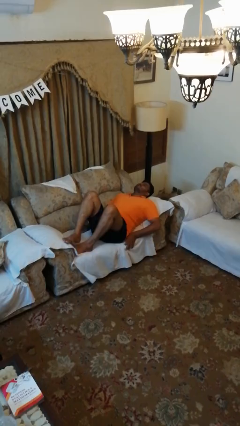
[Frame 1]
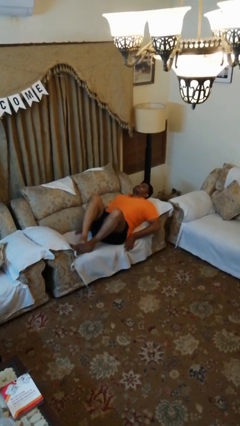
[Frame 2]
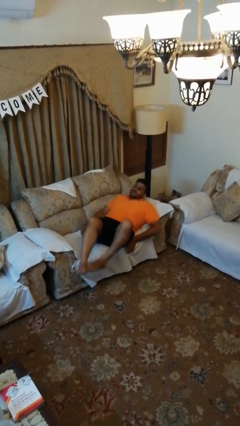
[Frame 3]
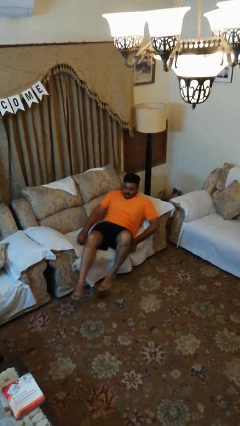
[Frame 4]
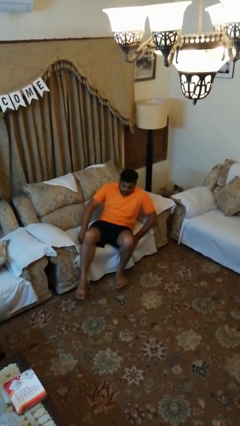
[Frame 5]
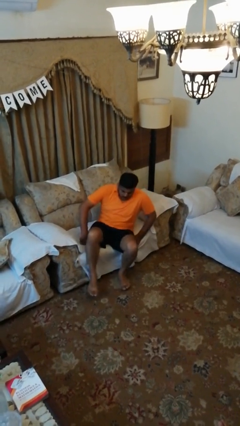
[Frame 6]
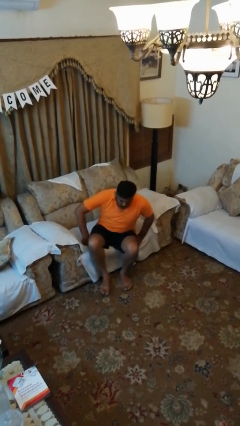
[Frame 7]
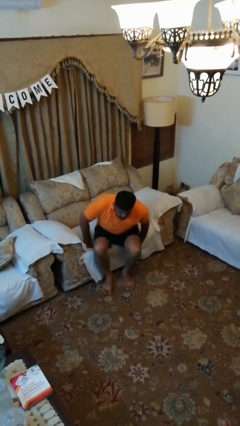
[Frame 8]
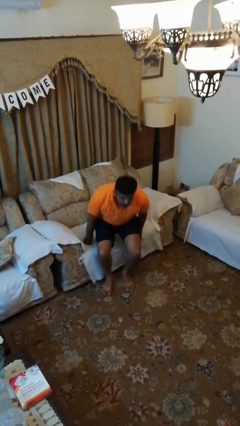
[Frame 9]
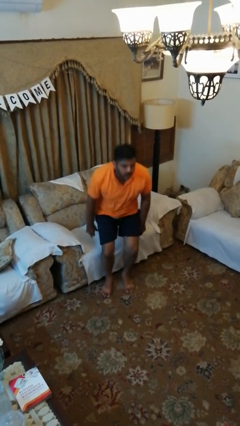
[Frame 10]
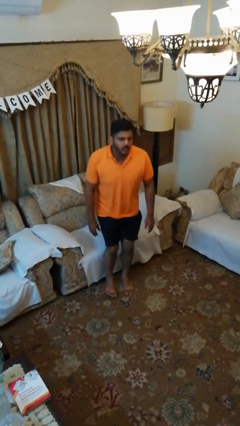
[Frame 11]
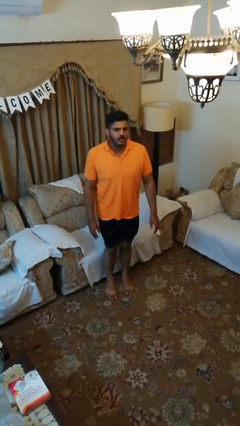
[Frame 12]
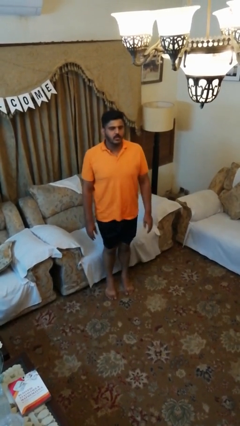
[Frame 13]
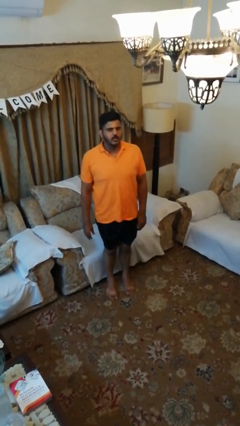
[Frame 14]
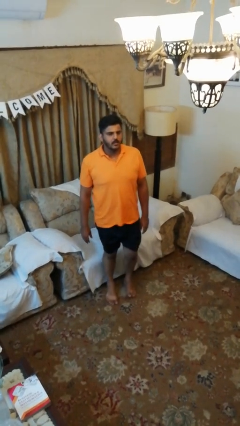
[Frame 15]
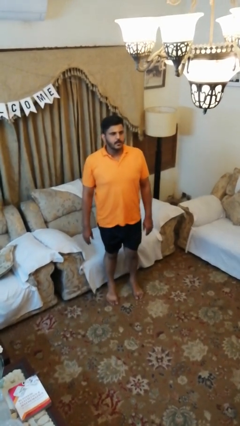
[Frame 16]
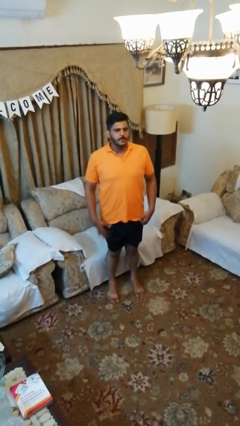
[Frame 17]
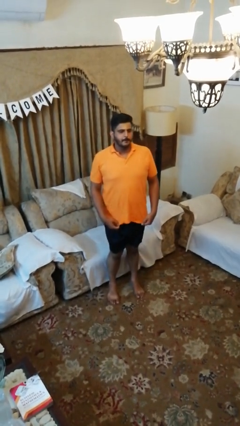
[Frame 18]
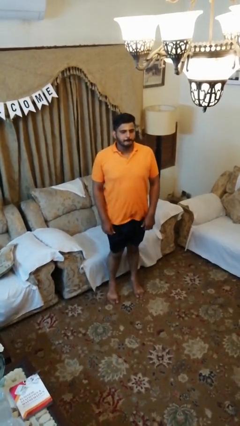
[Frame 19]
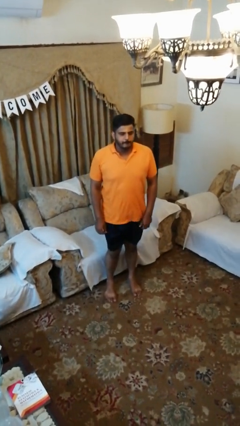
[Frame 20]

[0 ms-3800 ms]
person stands up

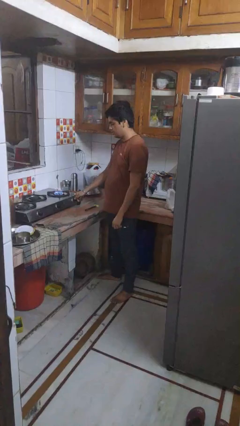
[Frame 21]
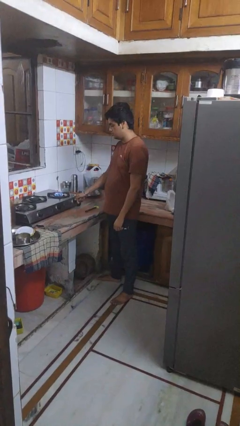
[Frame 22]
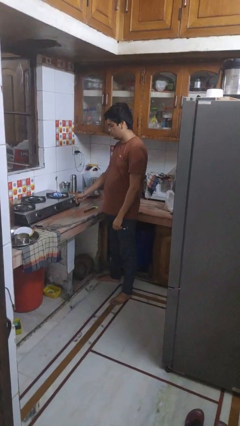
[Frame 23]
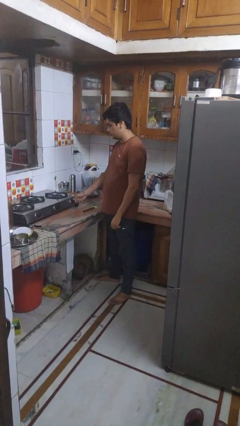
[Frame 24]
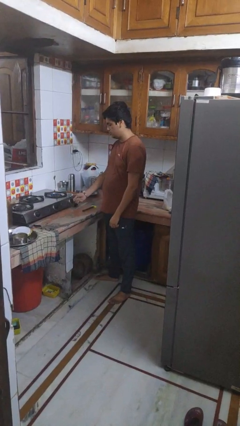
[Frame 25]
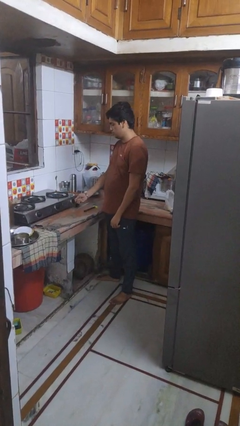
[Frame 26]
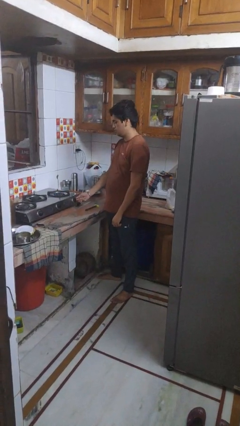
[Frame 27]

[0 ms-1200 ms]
person turns off stovetop

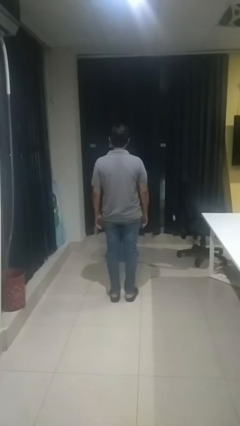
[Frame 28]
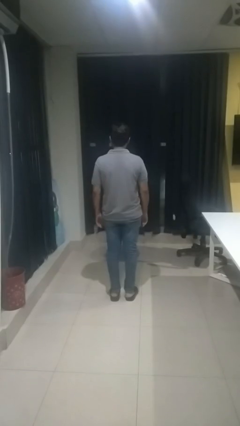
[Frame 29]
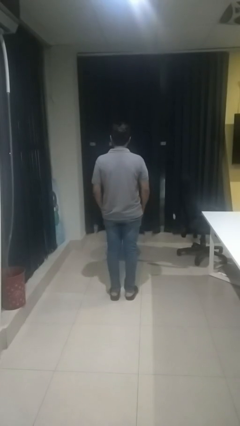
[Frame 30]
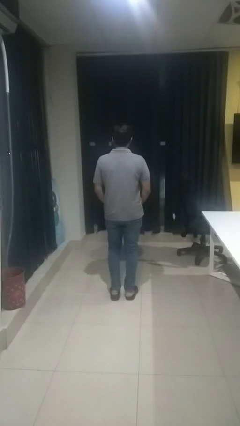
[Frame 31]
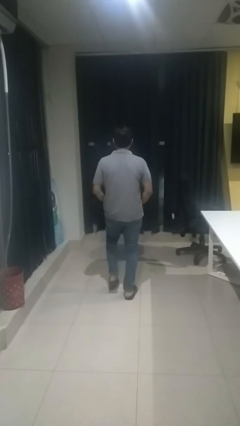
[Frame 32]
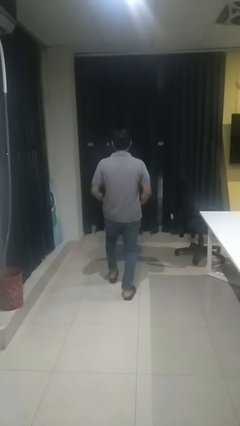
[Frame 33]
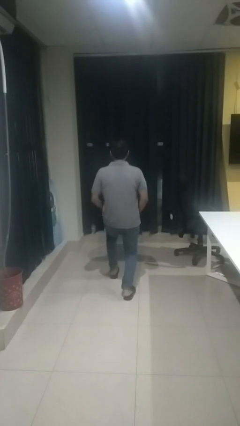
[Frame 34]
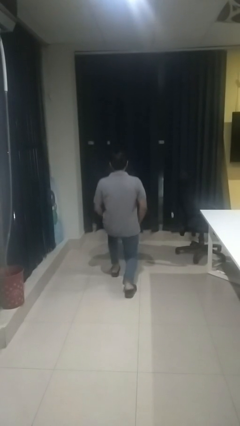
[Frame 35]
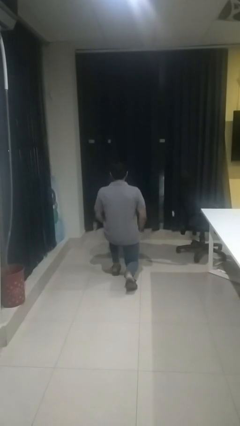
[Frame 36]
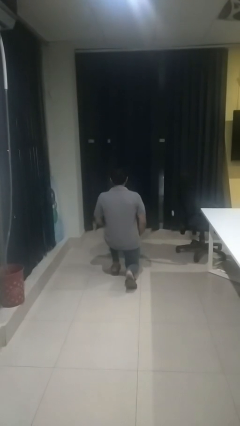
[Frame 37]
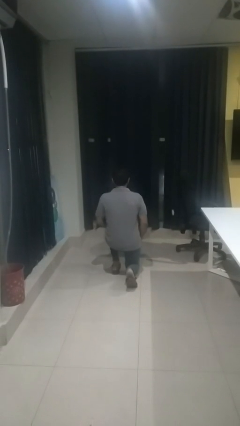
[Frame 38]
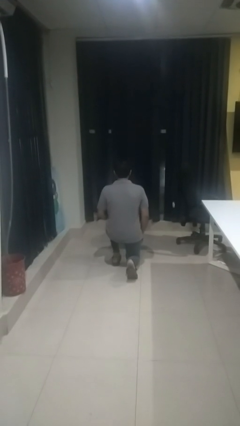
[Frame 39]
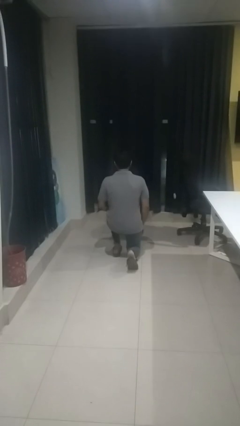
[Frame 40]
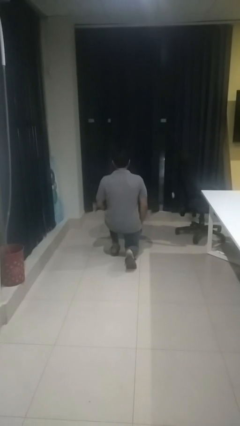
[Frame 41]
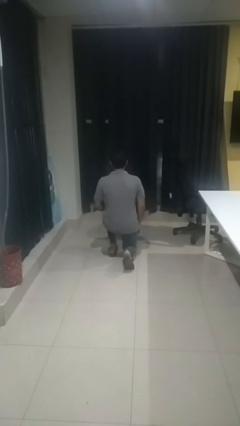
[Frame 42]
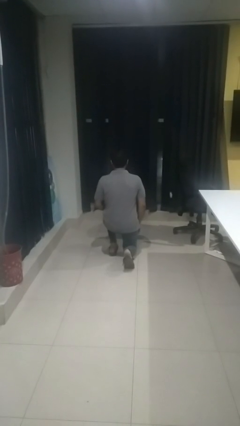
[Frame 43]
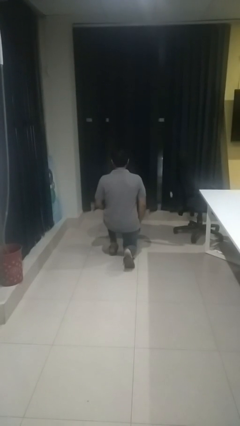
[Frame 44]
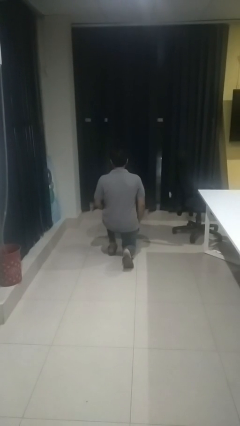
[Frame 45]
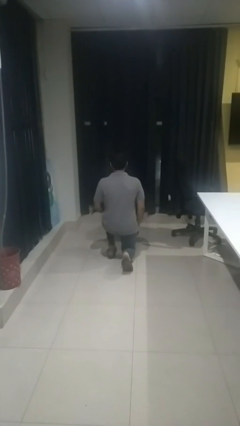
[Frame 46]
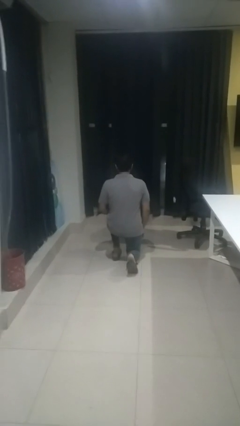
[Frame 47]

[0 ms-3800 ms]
person kneels

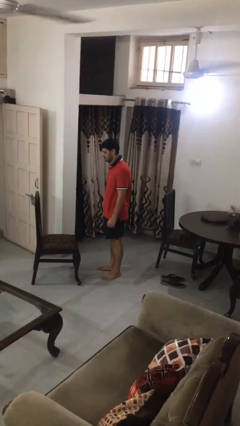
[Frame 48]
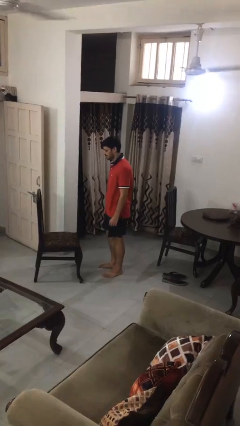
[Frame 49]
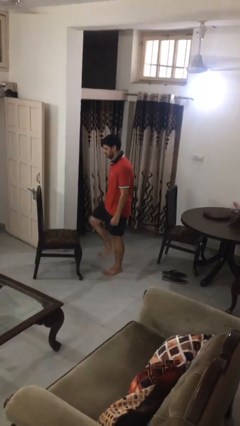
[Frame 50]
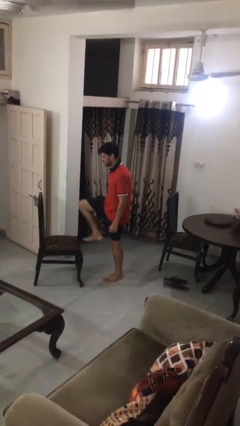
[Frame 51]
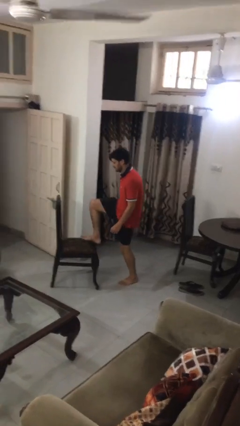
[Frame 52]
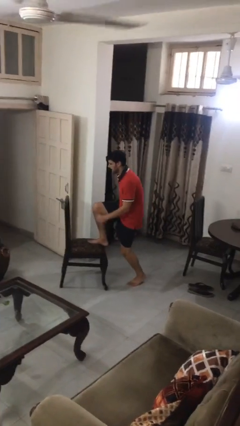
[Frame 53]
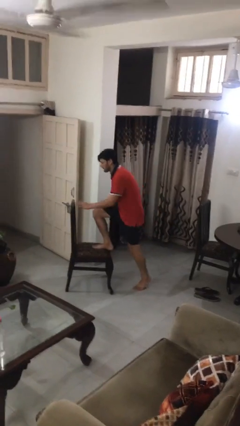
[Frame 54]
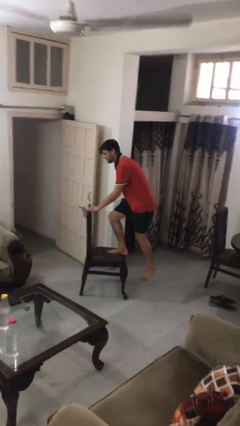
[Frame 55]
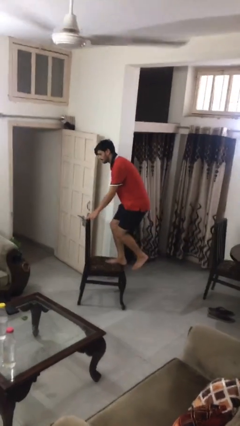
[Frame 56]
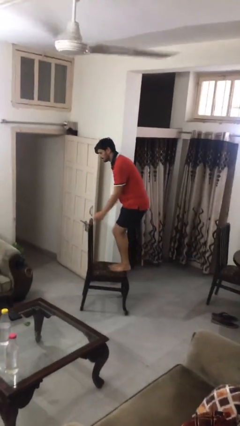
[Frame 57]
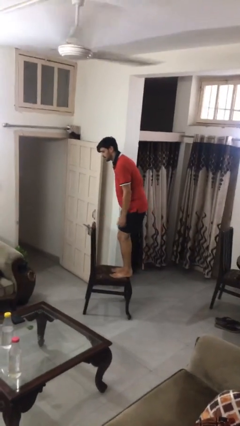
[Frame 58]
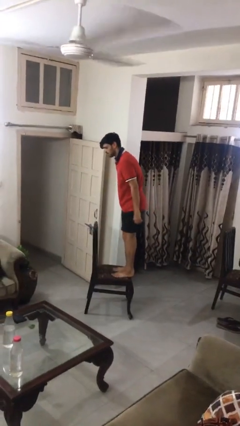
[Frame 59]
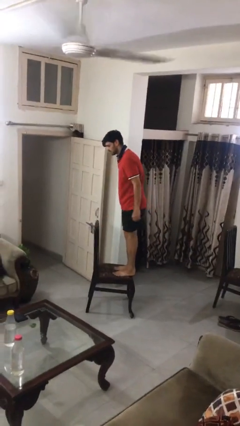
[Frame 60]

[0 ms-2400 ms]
person climbs on chair

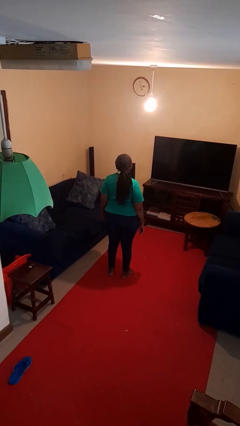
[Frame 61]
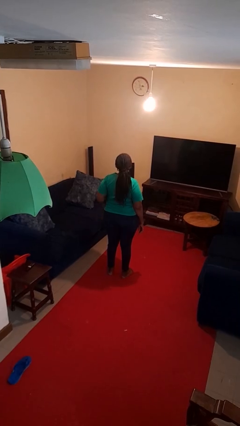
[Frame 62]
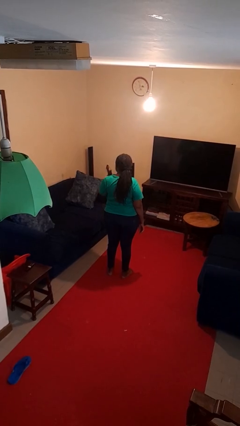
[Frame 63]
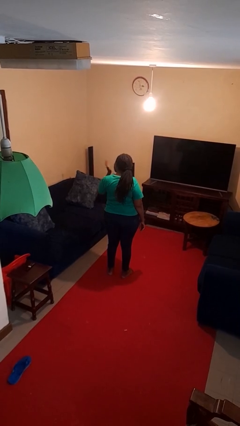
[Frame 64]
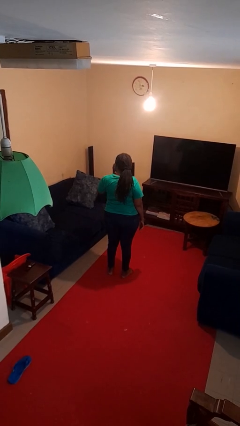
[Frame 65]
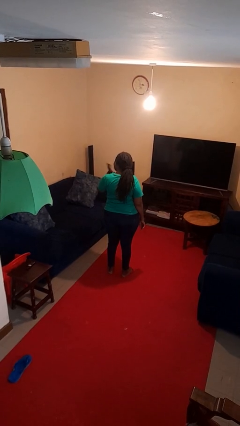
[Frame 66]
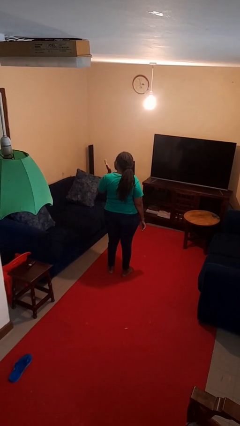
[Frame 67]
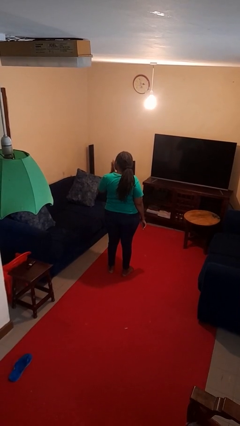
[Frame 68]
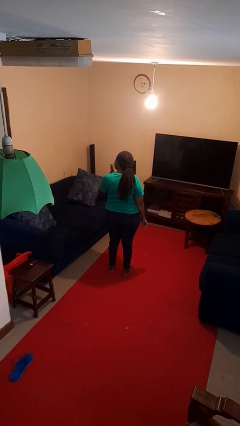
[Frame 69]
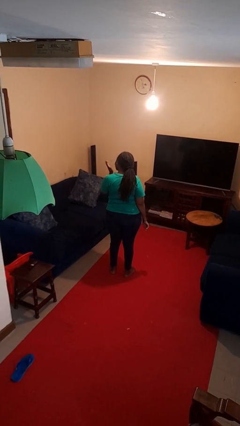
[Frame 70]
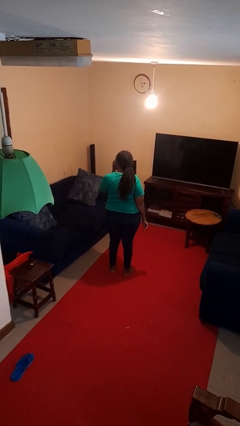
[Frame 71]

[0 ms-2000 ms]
person swats bug

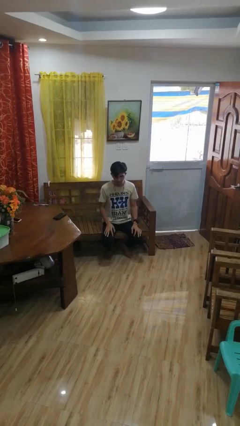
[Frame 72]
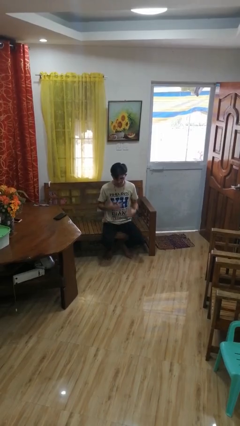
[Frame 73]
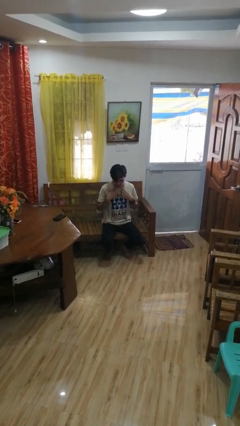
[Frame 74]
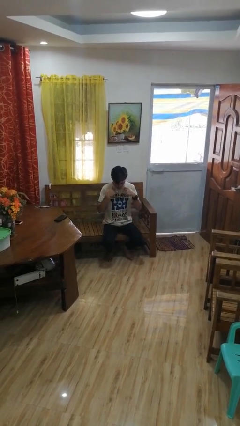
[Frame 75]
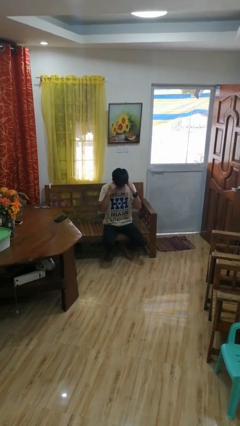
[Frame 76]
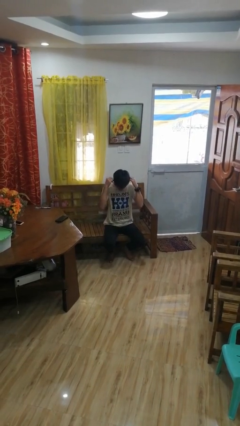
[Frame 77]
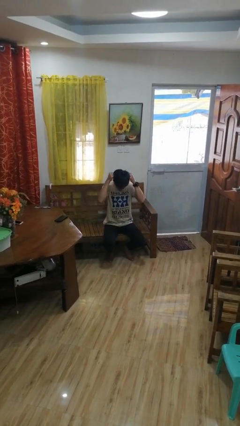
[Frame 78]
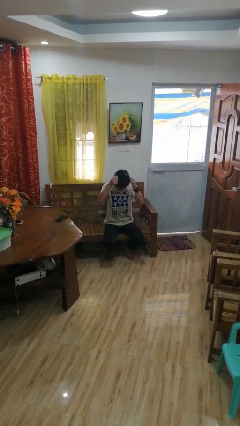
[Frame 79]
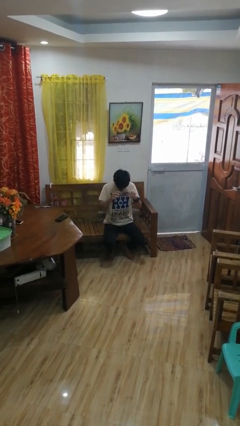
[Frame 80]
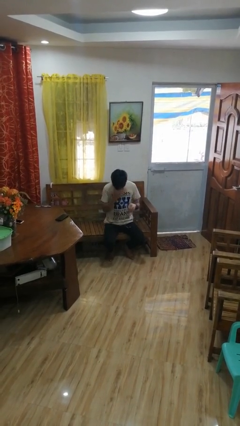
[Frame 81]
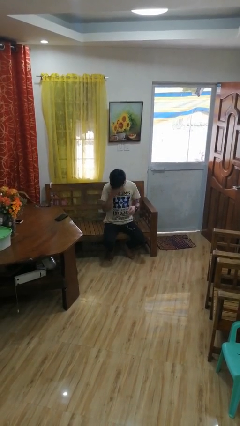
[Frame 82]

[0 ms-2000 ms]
person takes off necklace

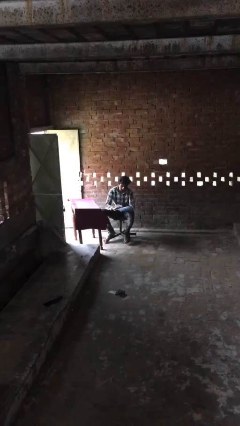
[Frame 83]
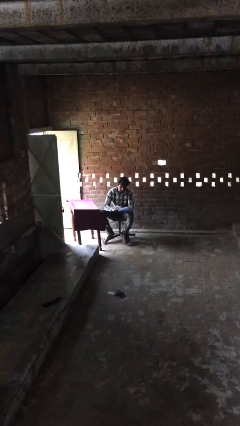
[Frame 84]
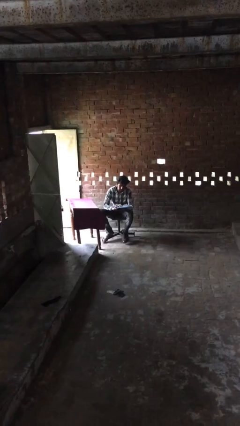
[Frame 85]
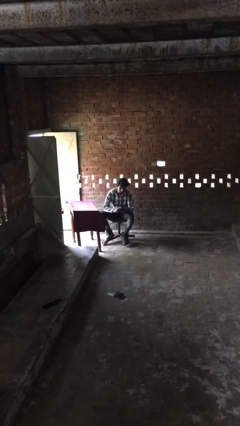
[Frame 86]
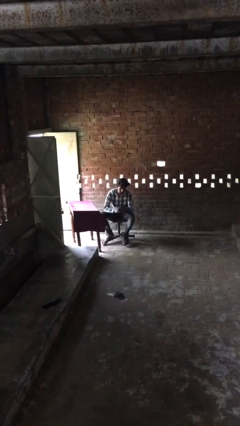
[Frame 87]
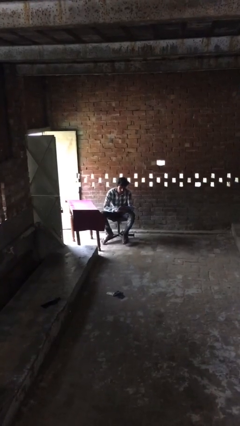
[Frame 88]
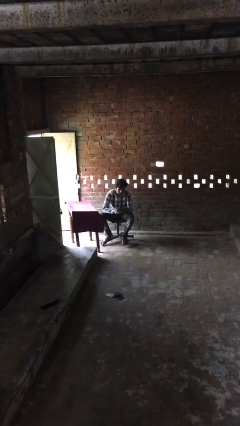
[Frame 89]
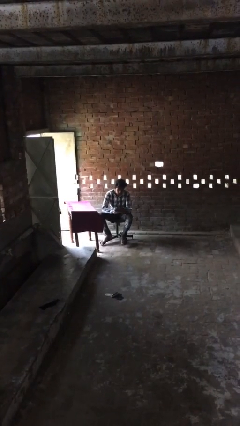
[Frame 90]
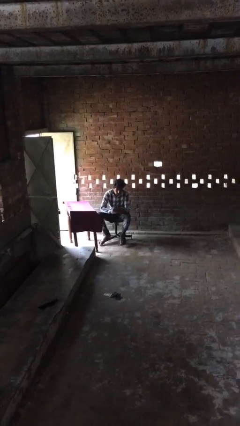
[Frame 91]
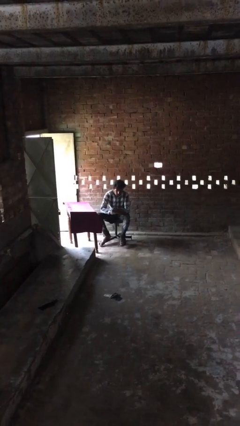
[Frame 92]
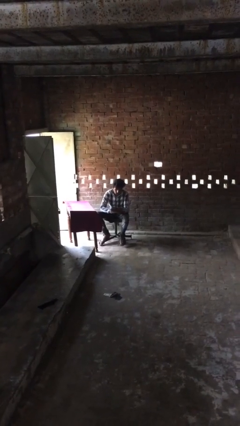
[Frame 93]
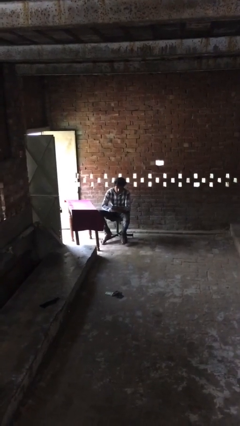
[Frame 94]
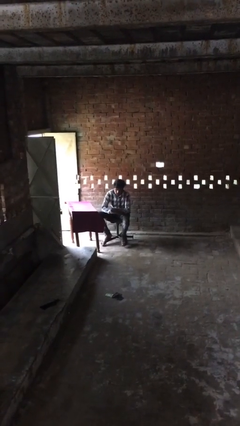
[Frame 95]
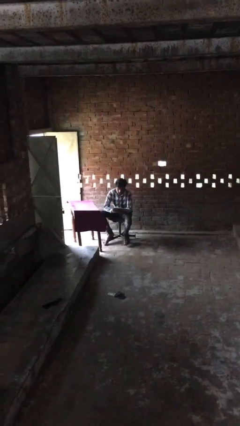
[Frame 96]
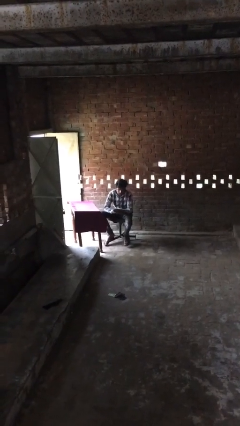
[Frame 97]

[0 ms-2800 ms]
person reads document
